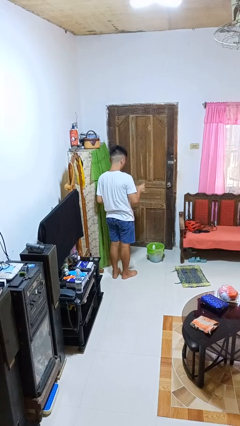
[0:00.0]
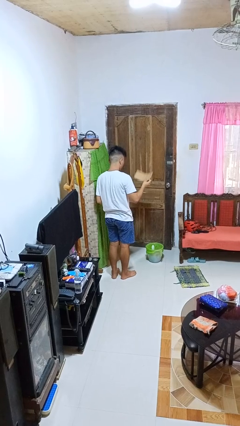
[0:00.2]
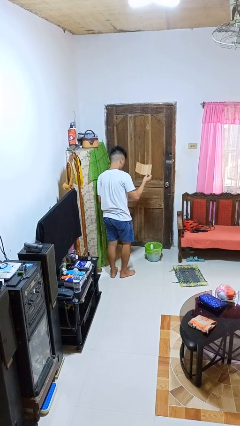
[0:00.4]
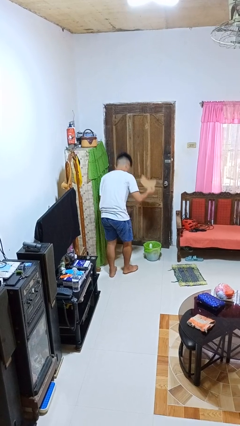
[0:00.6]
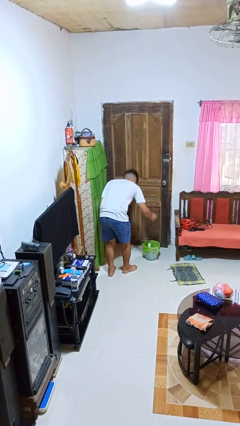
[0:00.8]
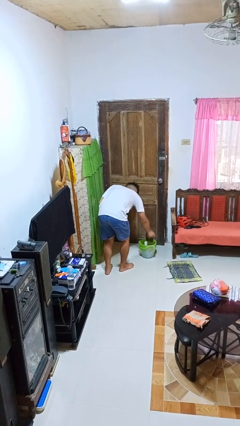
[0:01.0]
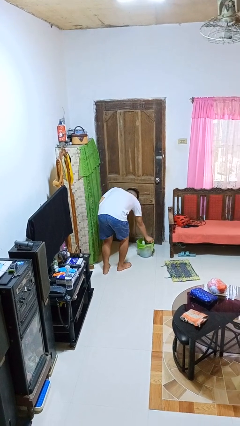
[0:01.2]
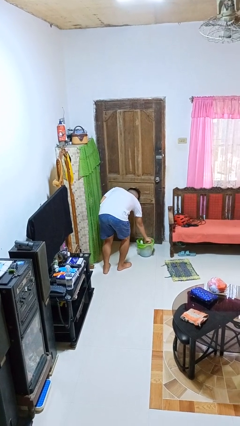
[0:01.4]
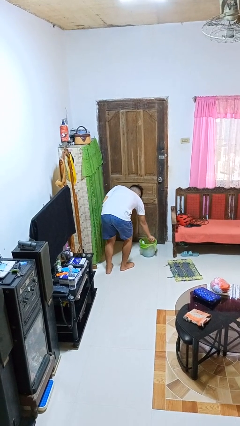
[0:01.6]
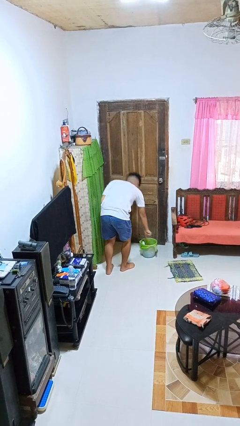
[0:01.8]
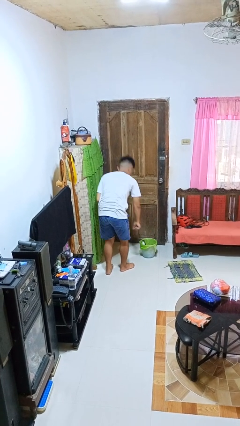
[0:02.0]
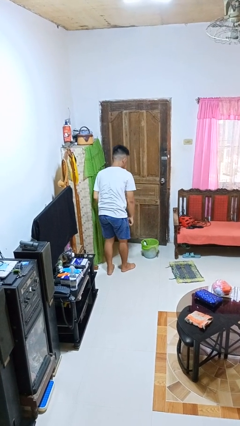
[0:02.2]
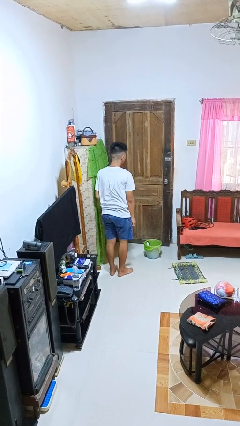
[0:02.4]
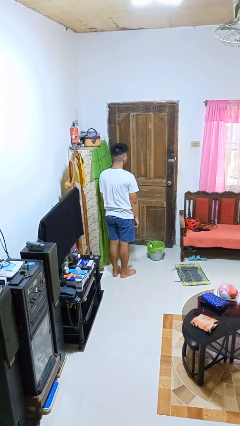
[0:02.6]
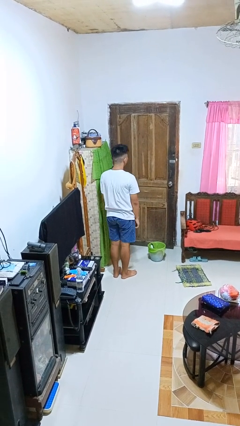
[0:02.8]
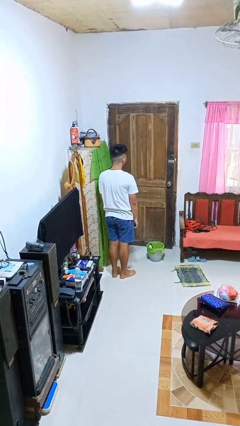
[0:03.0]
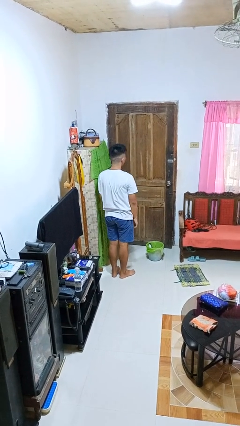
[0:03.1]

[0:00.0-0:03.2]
person discards trash

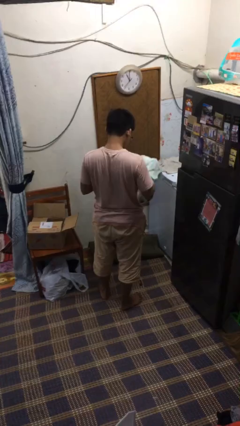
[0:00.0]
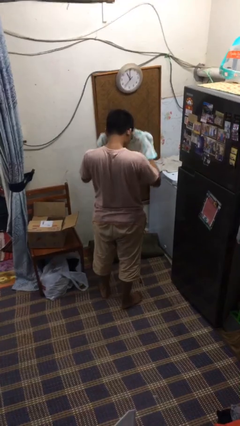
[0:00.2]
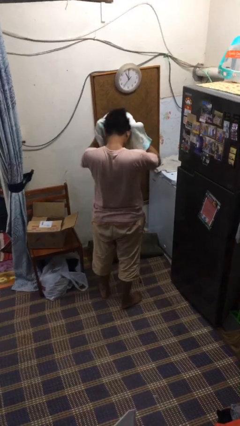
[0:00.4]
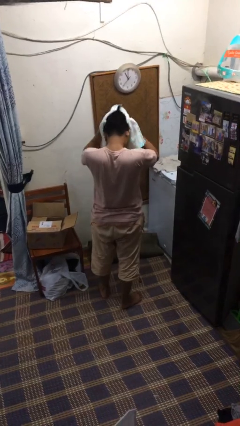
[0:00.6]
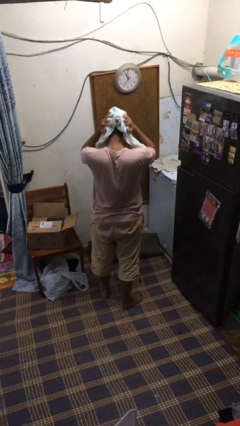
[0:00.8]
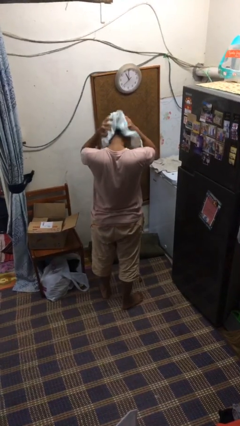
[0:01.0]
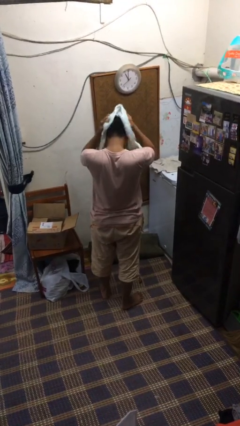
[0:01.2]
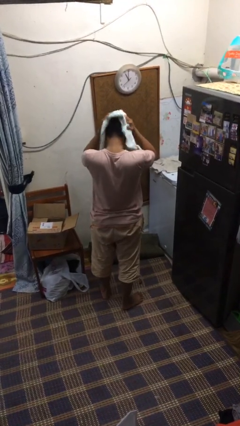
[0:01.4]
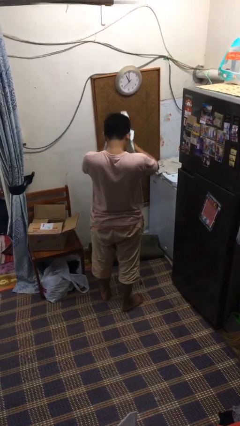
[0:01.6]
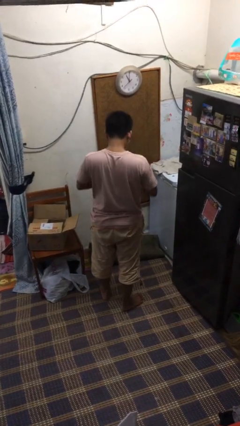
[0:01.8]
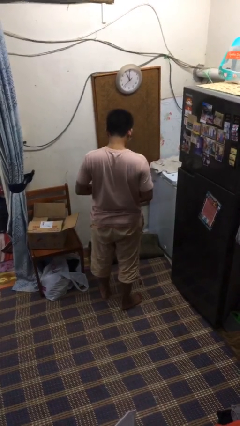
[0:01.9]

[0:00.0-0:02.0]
person dries hair with towel

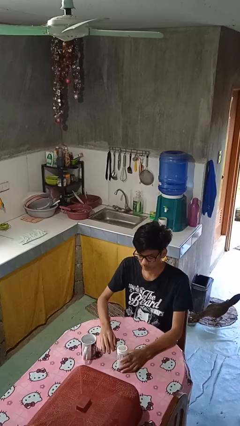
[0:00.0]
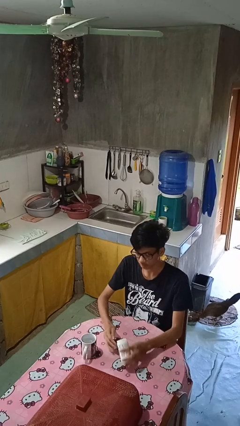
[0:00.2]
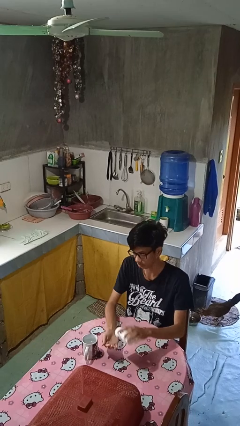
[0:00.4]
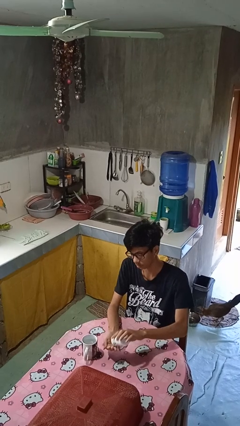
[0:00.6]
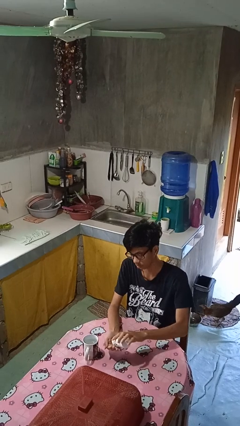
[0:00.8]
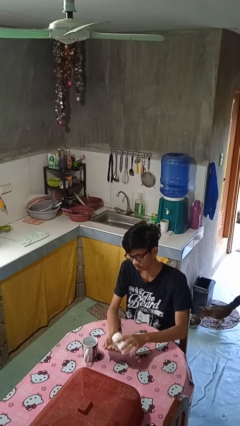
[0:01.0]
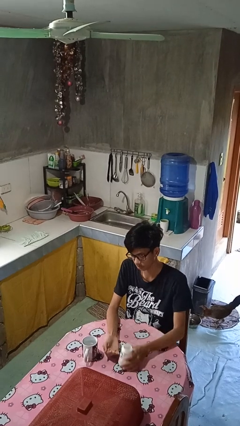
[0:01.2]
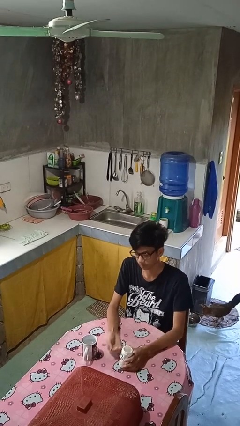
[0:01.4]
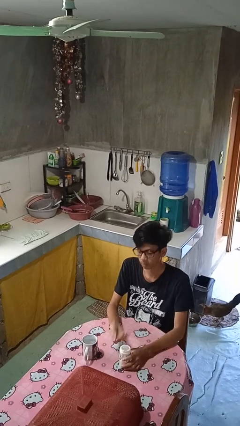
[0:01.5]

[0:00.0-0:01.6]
person takes medicine pills

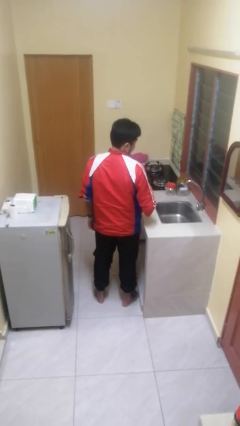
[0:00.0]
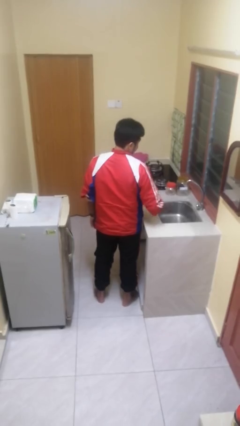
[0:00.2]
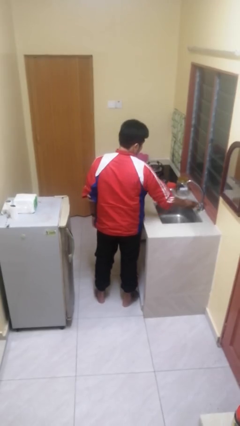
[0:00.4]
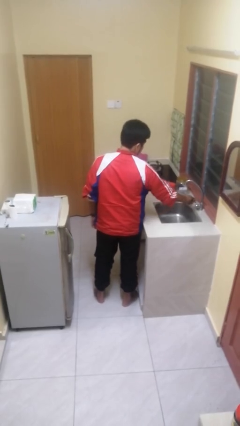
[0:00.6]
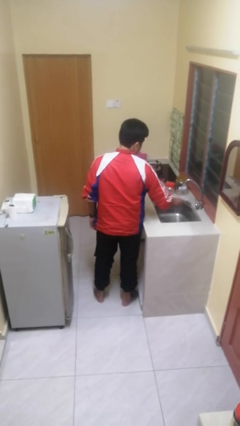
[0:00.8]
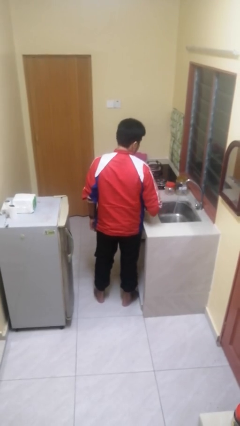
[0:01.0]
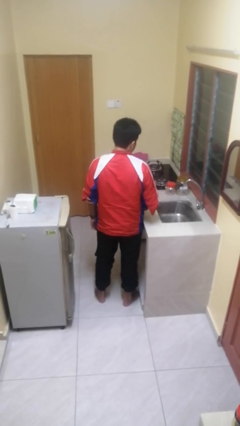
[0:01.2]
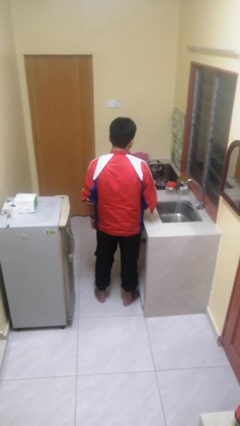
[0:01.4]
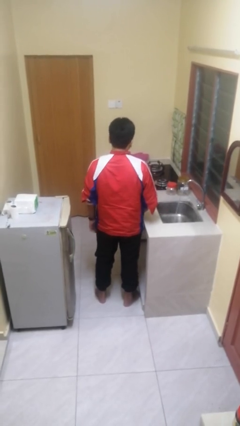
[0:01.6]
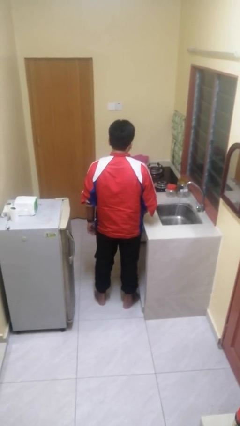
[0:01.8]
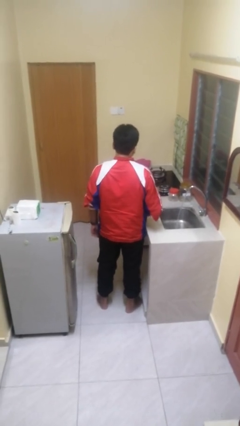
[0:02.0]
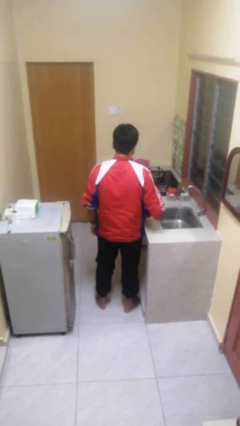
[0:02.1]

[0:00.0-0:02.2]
person turns on faucet

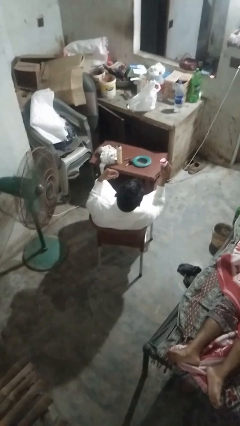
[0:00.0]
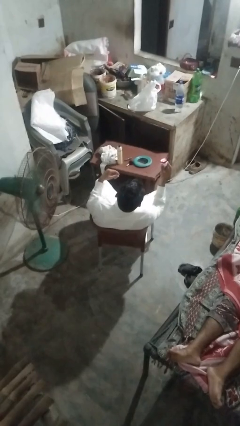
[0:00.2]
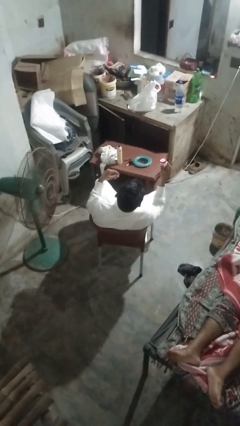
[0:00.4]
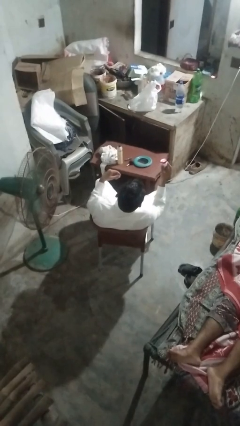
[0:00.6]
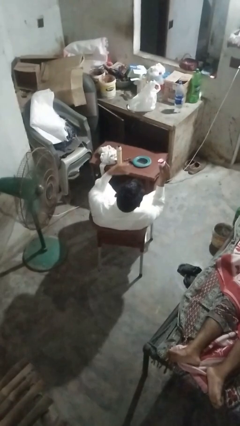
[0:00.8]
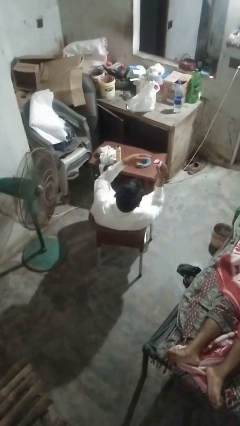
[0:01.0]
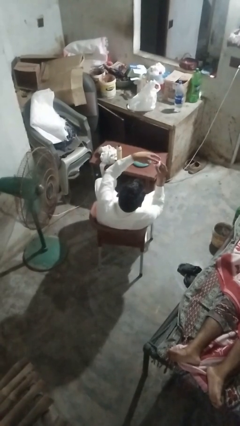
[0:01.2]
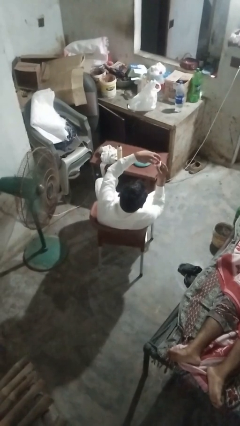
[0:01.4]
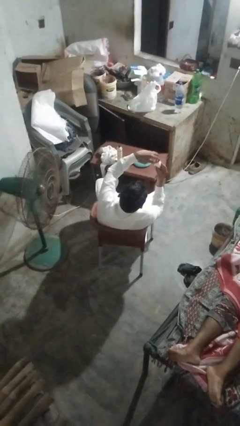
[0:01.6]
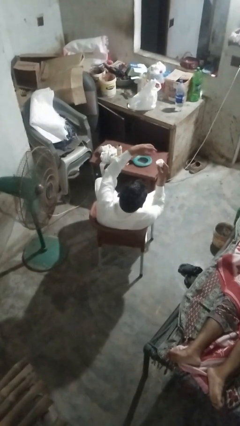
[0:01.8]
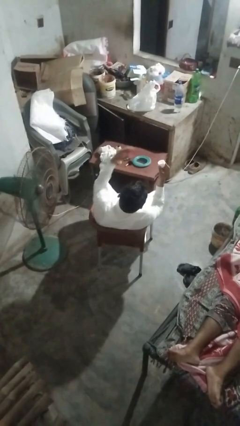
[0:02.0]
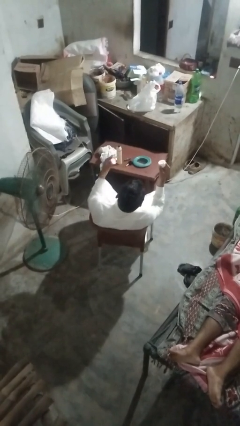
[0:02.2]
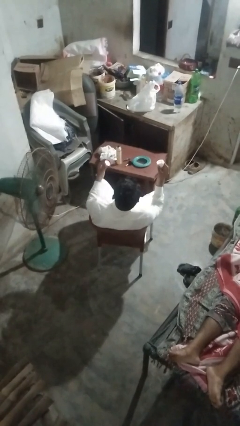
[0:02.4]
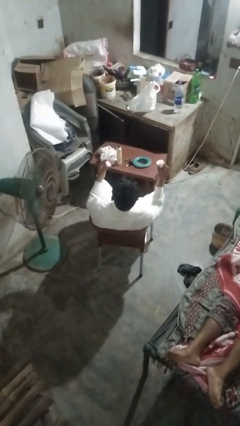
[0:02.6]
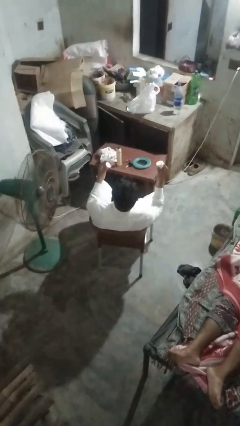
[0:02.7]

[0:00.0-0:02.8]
person opens jar

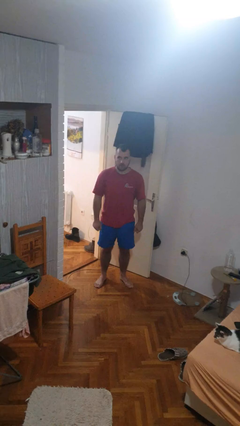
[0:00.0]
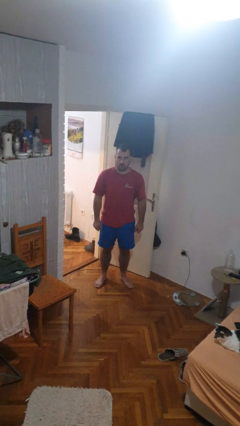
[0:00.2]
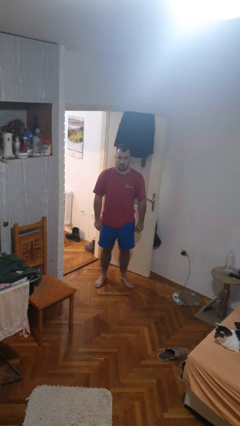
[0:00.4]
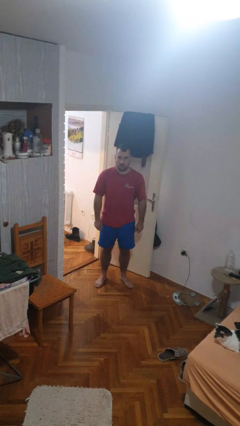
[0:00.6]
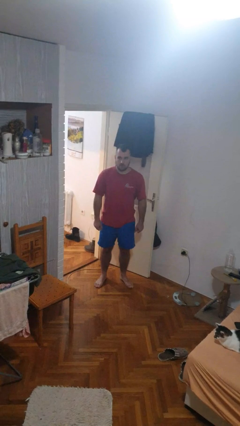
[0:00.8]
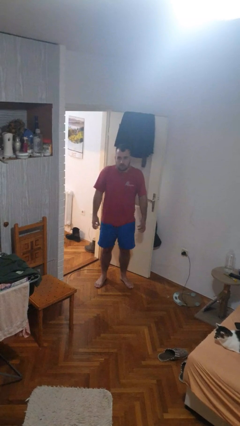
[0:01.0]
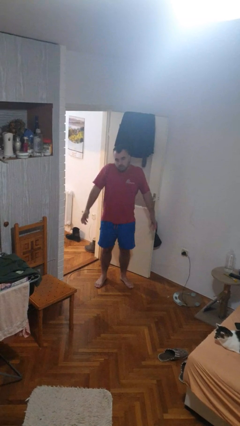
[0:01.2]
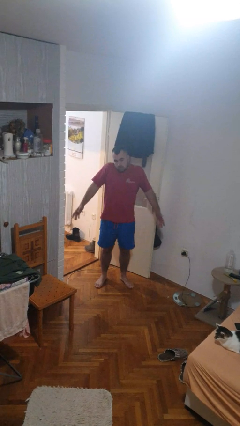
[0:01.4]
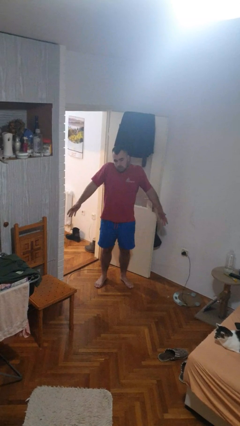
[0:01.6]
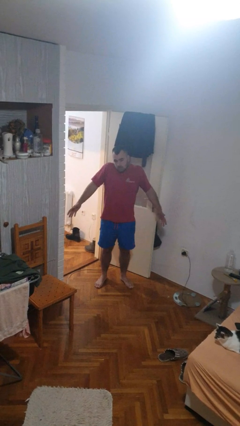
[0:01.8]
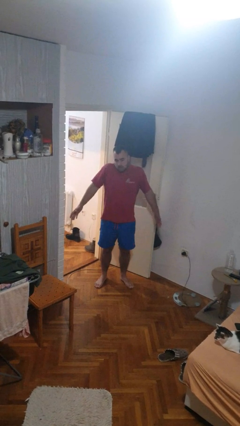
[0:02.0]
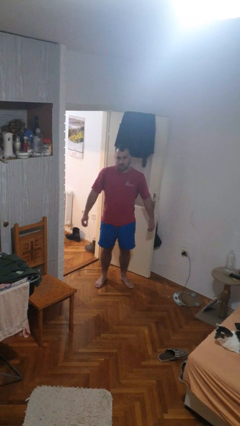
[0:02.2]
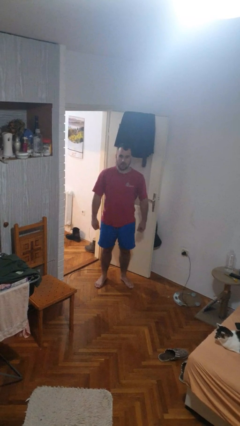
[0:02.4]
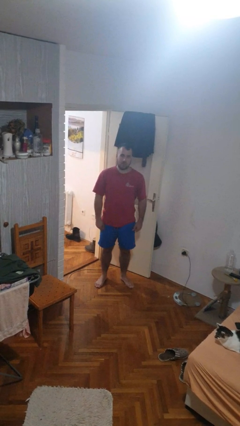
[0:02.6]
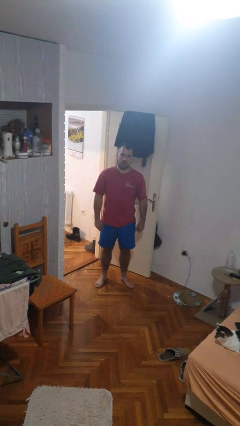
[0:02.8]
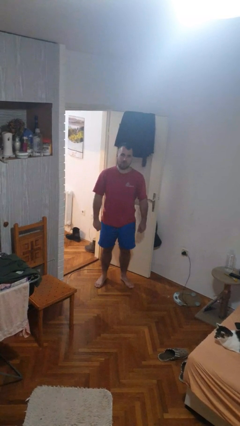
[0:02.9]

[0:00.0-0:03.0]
person shrugs

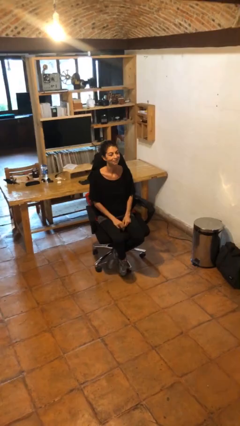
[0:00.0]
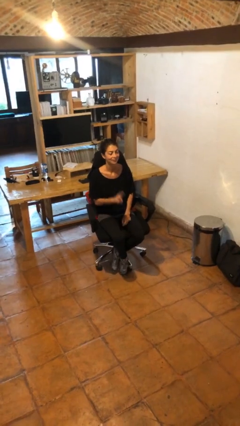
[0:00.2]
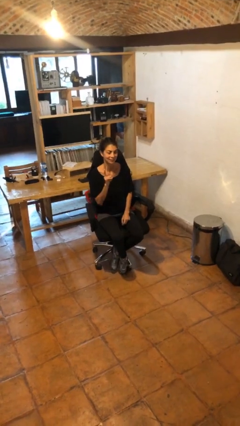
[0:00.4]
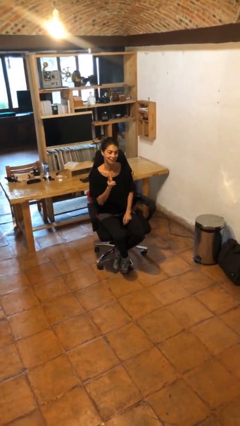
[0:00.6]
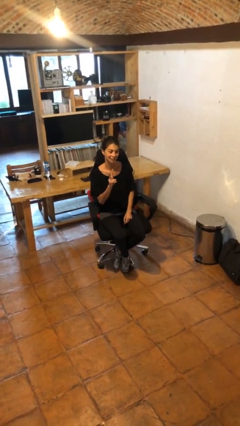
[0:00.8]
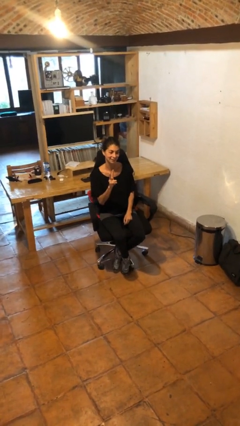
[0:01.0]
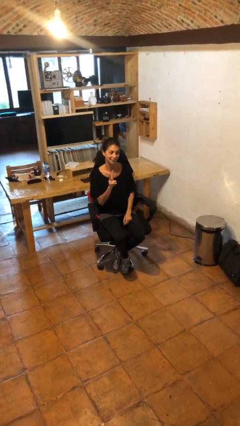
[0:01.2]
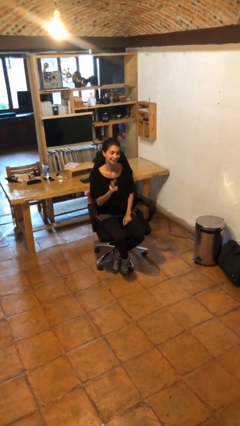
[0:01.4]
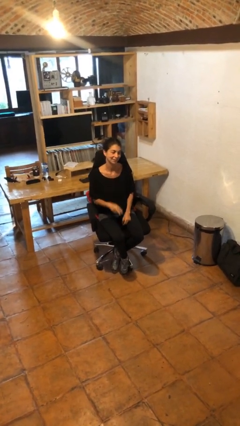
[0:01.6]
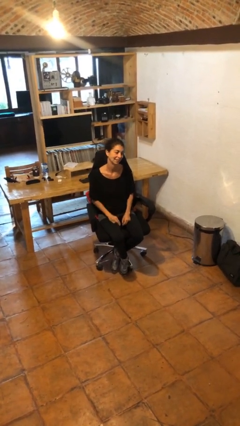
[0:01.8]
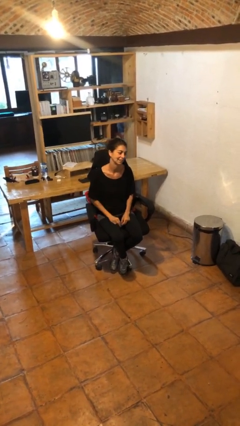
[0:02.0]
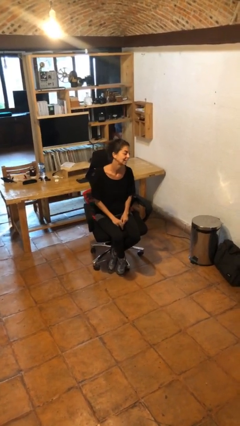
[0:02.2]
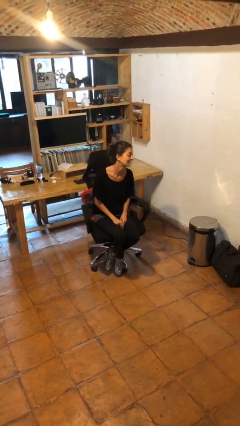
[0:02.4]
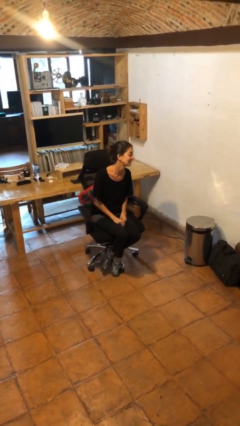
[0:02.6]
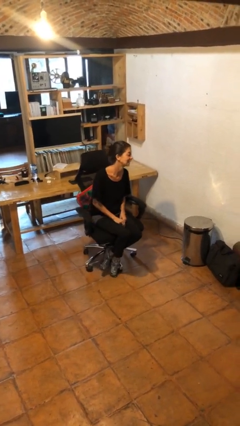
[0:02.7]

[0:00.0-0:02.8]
person gestures peace
